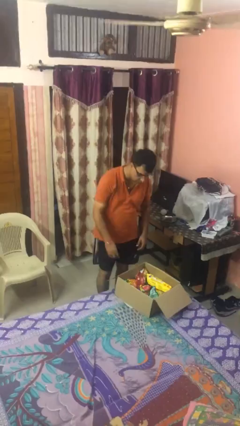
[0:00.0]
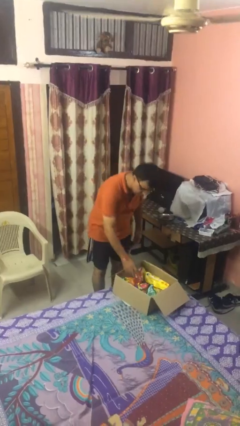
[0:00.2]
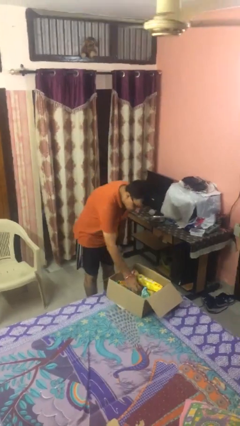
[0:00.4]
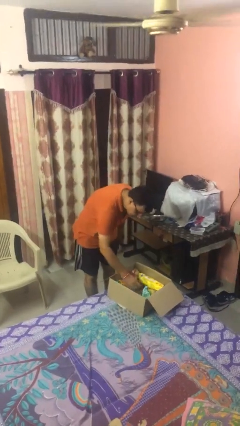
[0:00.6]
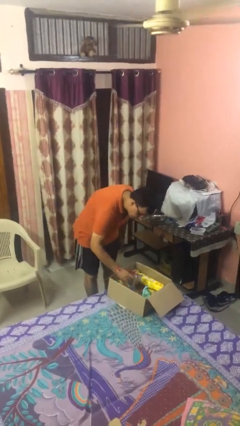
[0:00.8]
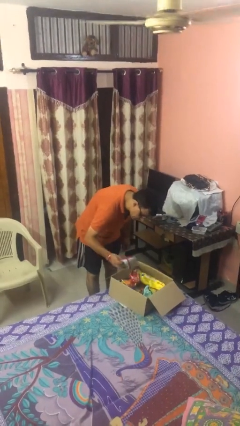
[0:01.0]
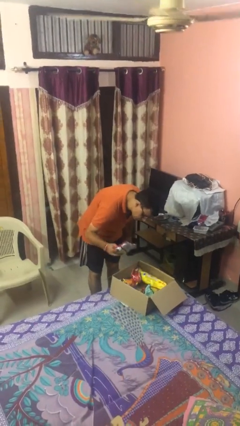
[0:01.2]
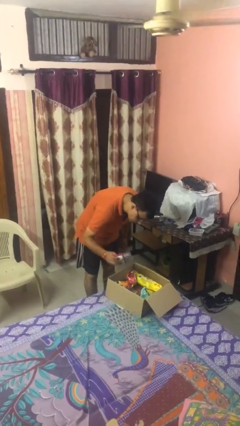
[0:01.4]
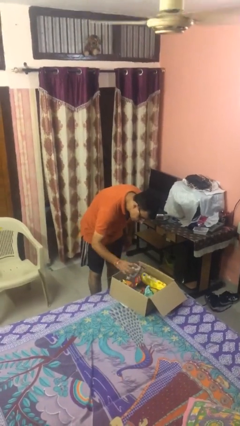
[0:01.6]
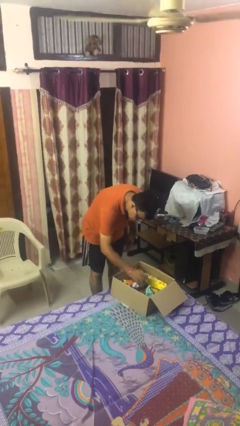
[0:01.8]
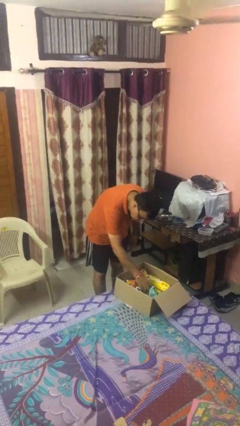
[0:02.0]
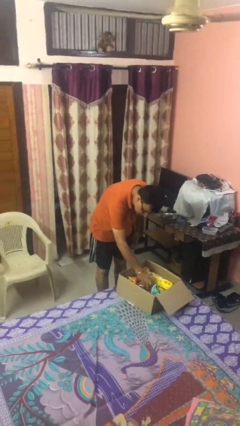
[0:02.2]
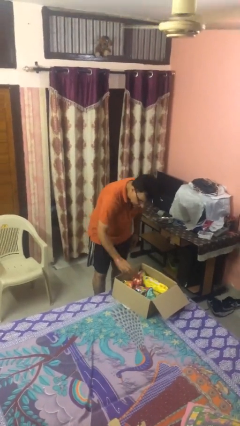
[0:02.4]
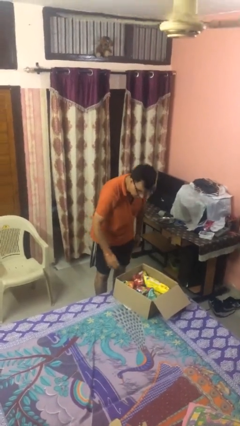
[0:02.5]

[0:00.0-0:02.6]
person searches in box

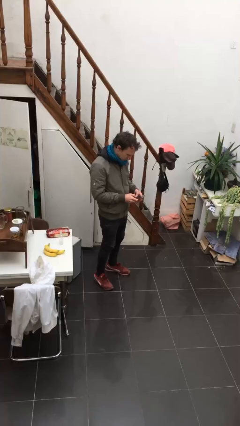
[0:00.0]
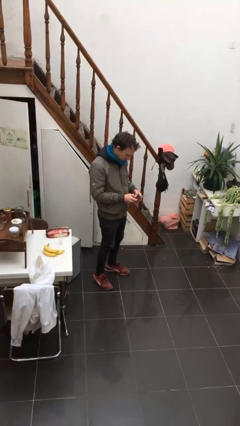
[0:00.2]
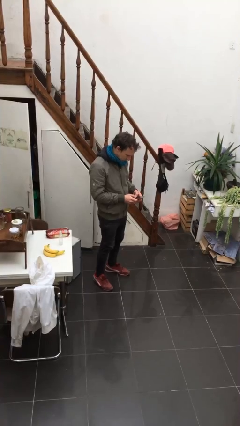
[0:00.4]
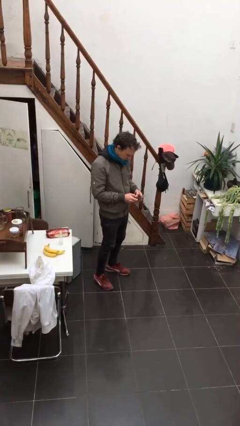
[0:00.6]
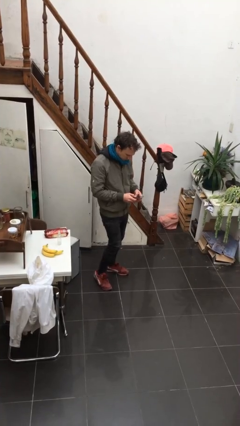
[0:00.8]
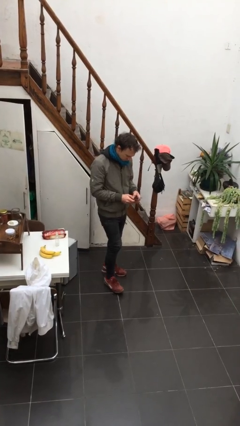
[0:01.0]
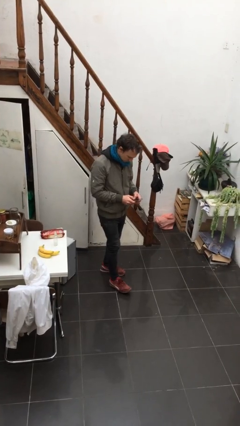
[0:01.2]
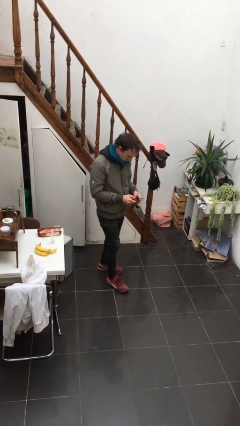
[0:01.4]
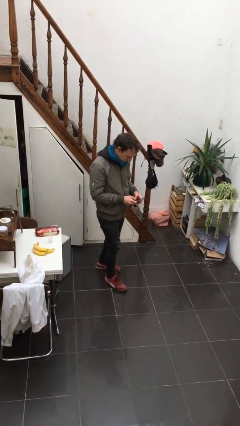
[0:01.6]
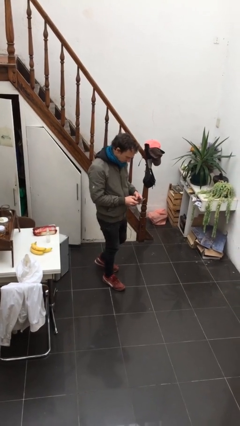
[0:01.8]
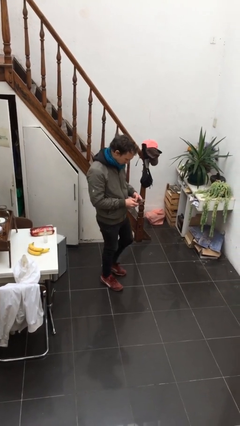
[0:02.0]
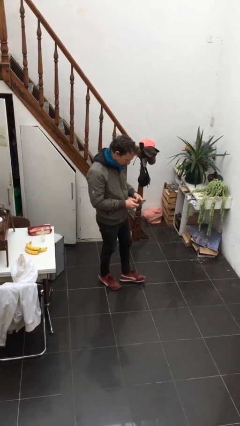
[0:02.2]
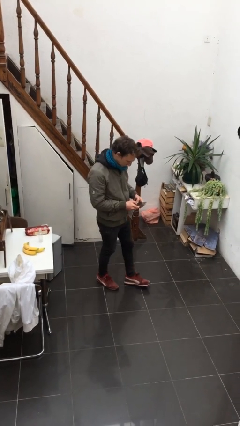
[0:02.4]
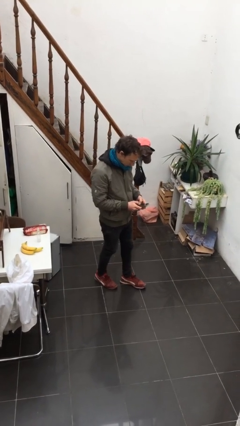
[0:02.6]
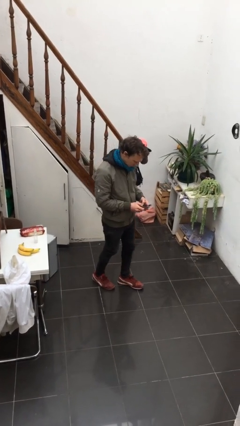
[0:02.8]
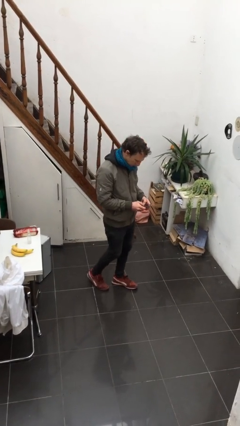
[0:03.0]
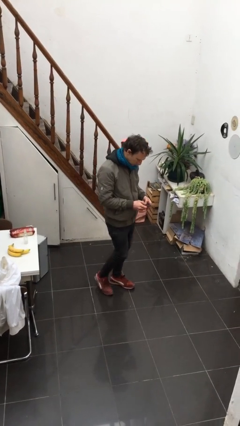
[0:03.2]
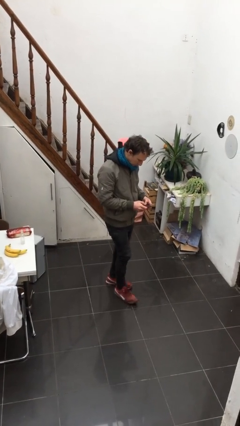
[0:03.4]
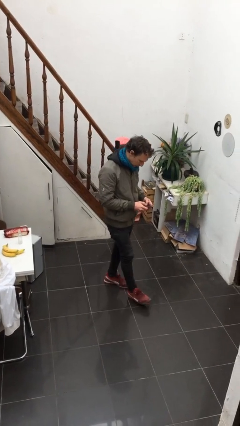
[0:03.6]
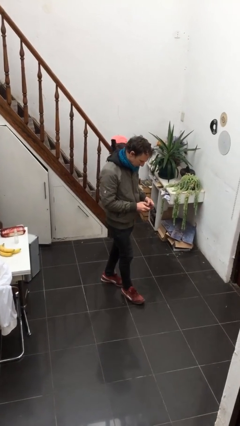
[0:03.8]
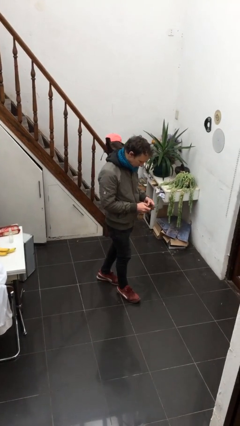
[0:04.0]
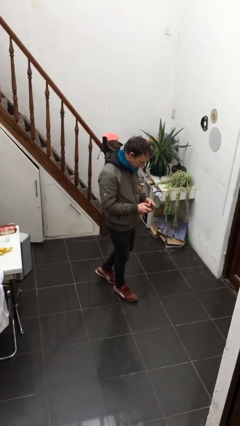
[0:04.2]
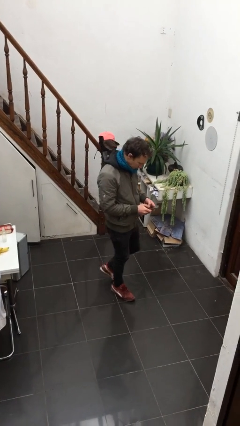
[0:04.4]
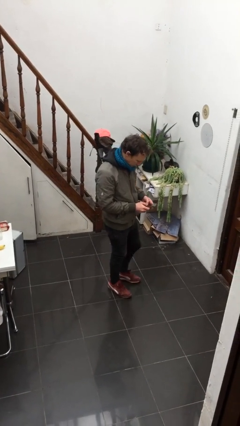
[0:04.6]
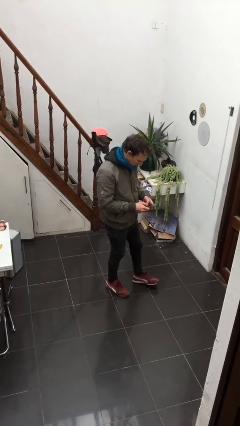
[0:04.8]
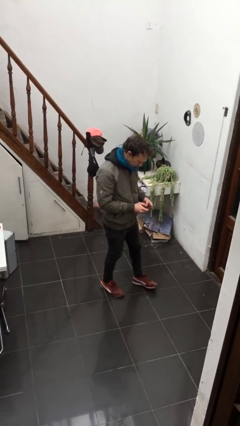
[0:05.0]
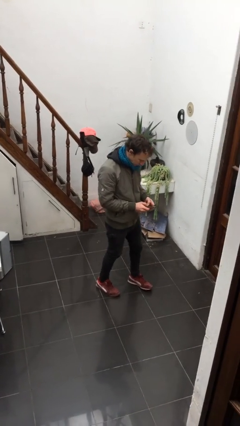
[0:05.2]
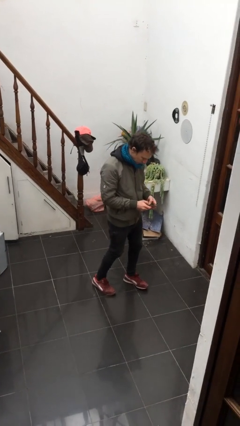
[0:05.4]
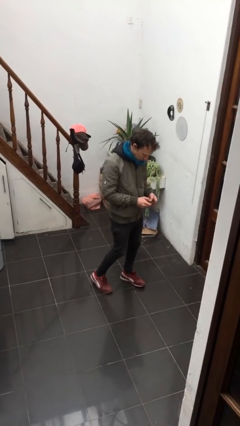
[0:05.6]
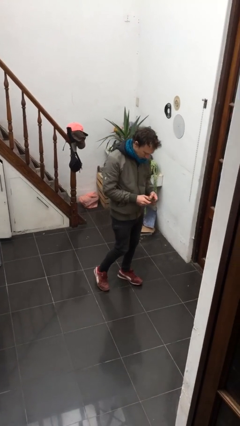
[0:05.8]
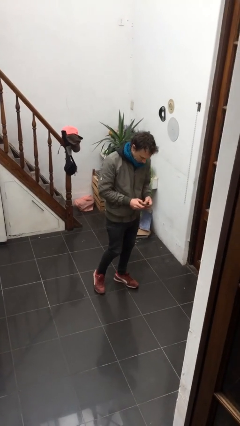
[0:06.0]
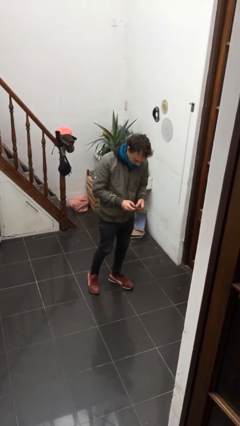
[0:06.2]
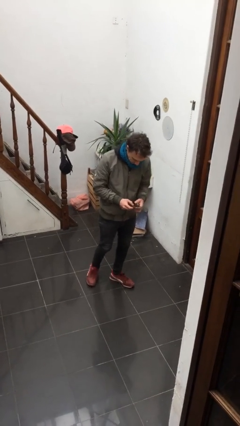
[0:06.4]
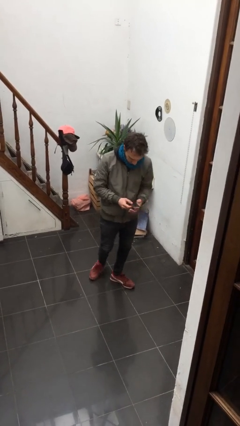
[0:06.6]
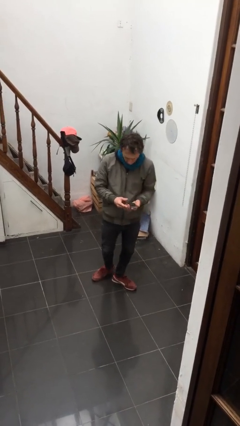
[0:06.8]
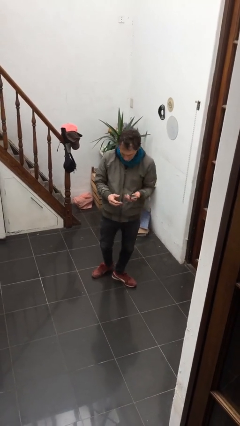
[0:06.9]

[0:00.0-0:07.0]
person texts on phone

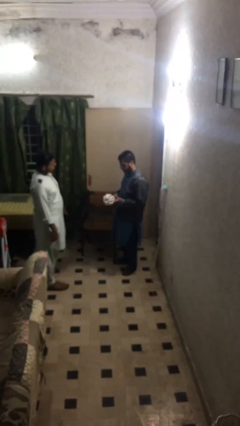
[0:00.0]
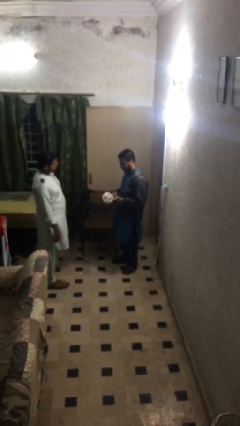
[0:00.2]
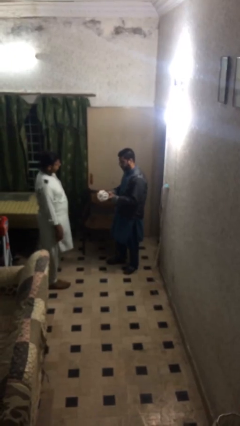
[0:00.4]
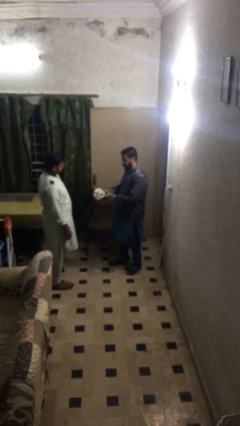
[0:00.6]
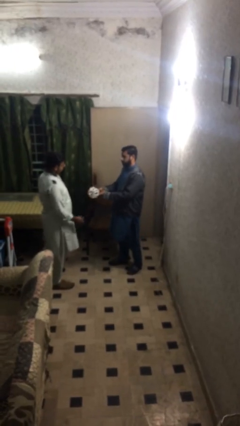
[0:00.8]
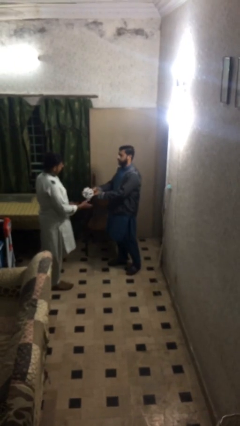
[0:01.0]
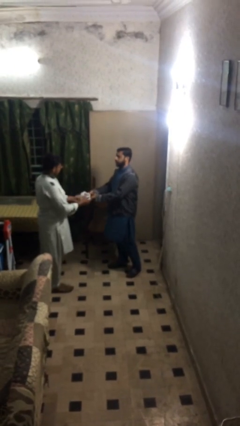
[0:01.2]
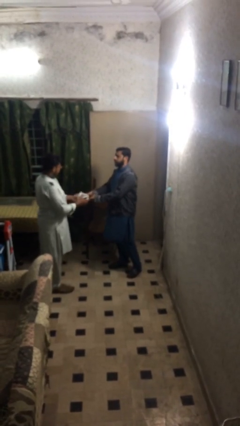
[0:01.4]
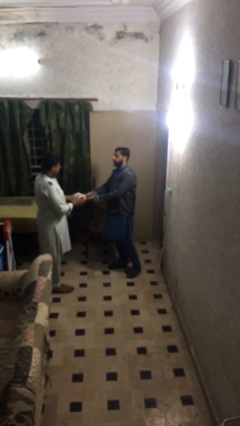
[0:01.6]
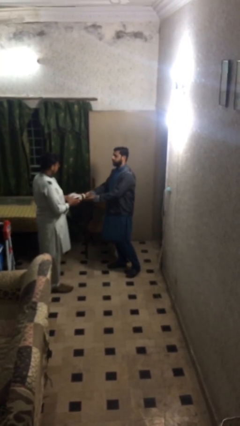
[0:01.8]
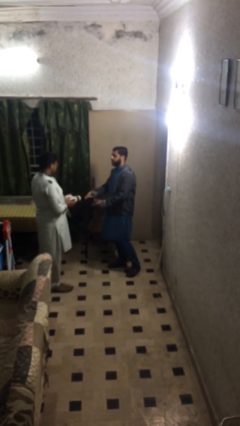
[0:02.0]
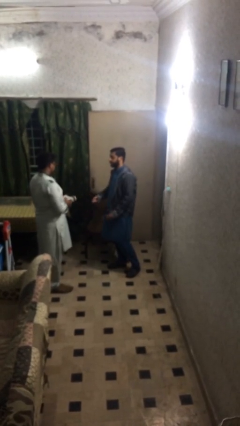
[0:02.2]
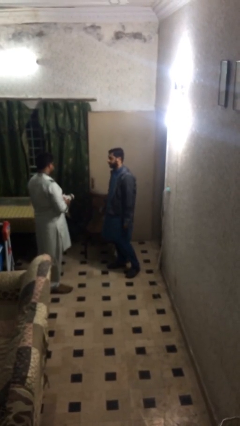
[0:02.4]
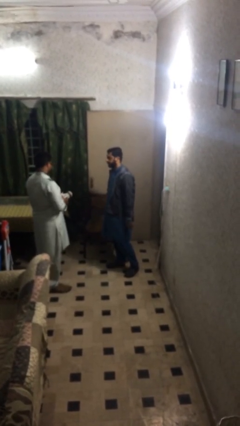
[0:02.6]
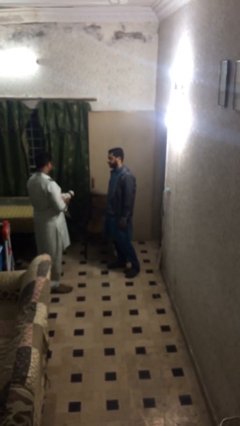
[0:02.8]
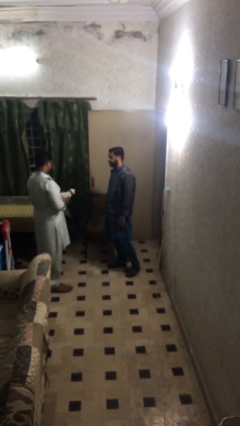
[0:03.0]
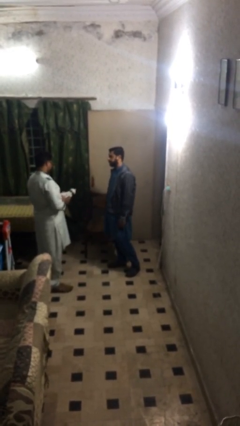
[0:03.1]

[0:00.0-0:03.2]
person transfers object to person

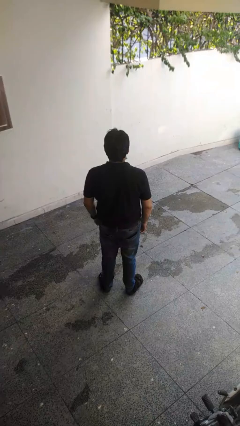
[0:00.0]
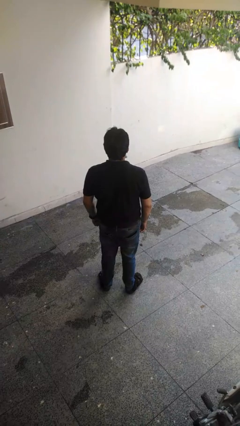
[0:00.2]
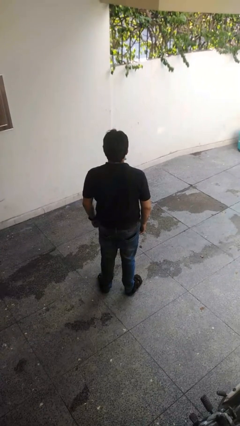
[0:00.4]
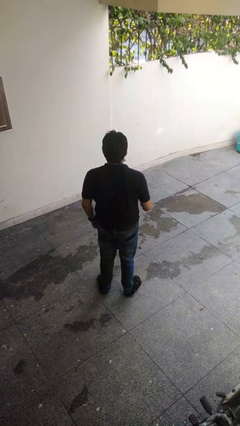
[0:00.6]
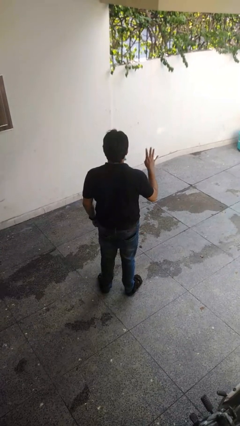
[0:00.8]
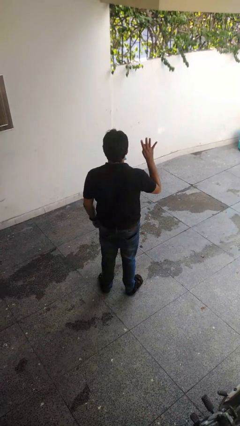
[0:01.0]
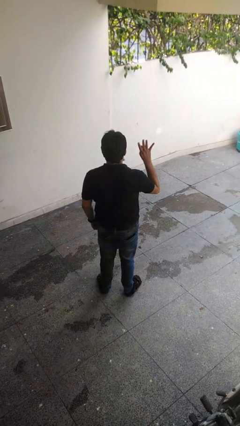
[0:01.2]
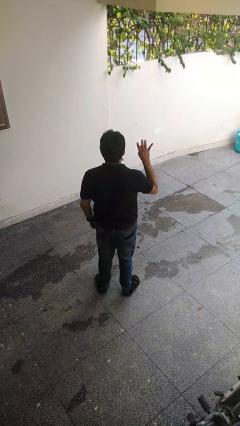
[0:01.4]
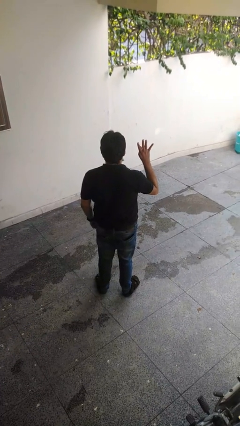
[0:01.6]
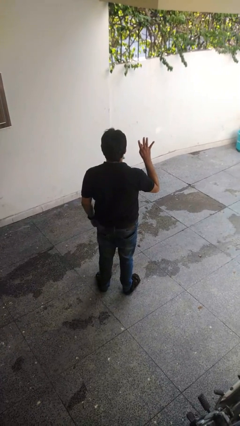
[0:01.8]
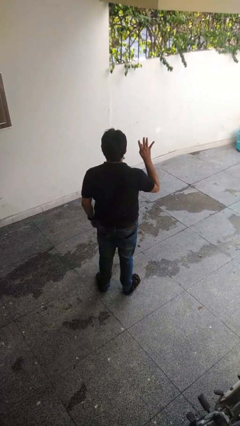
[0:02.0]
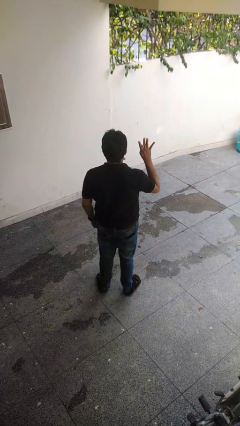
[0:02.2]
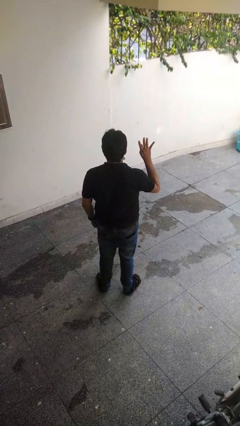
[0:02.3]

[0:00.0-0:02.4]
person gestures number four

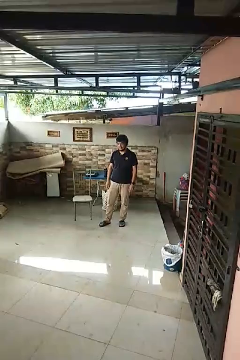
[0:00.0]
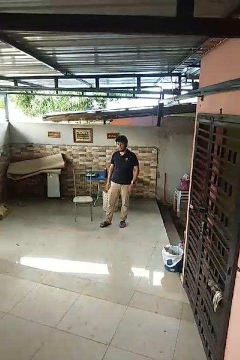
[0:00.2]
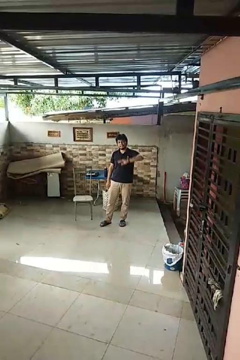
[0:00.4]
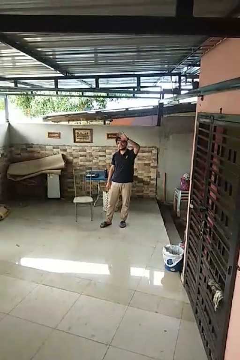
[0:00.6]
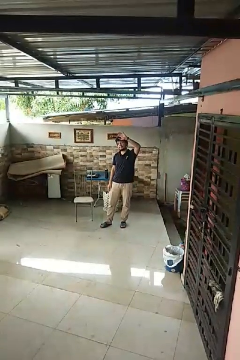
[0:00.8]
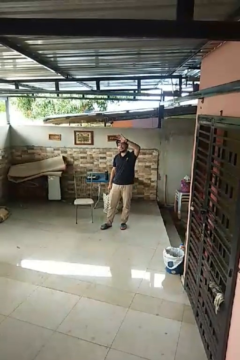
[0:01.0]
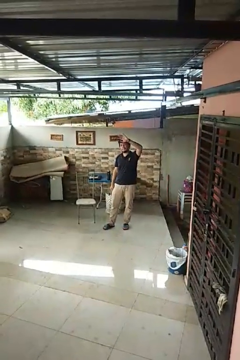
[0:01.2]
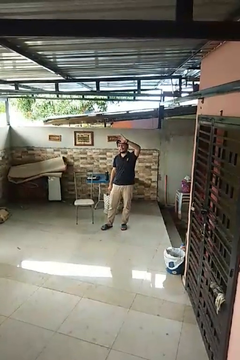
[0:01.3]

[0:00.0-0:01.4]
person gestures swipe up

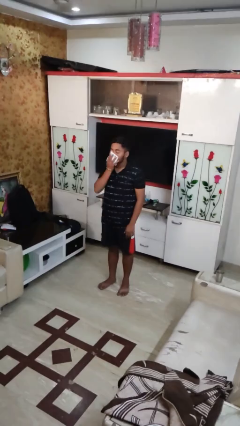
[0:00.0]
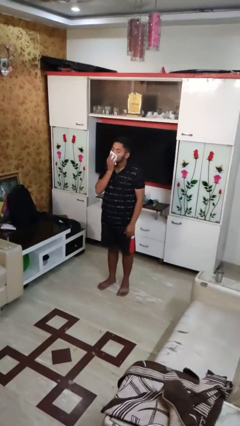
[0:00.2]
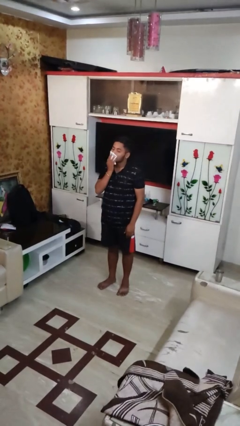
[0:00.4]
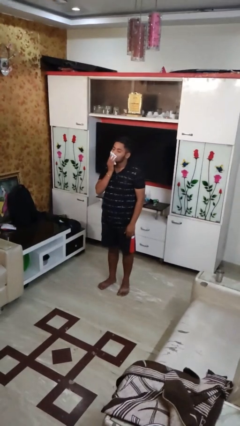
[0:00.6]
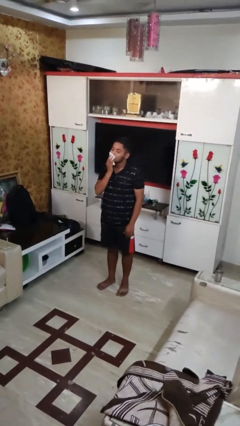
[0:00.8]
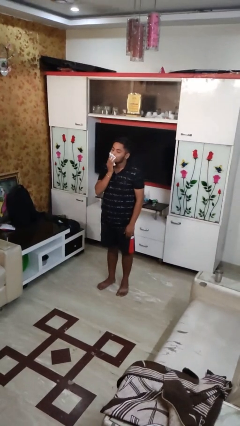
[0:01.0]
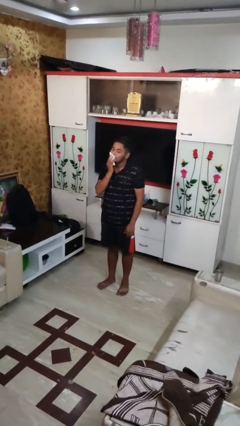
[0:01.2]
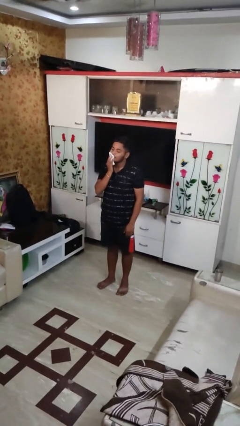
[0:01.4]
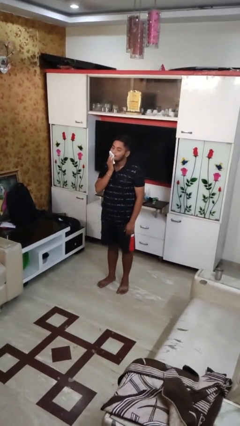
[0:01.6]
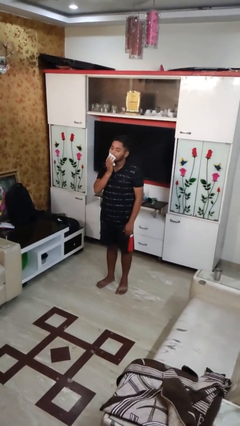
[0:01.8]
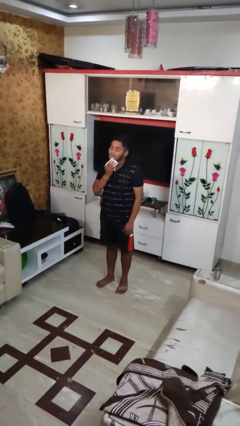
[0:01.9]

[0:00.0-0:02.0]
person wipes mouth with napkin
